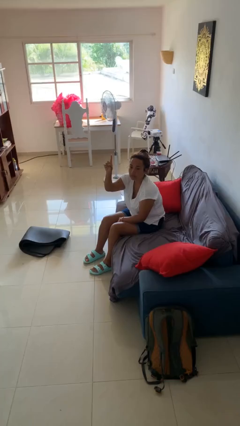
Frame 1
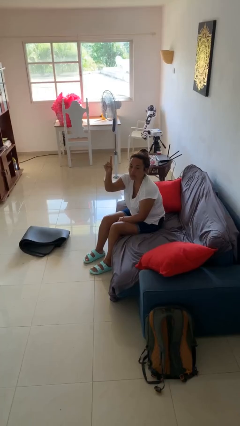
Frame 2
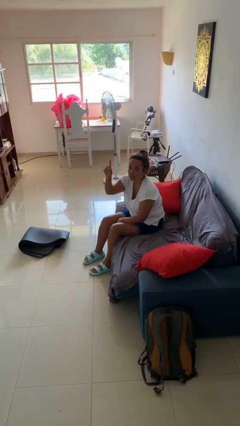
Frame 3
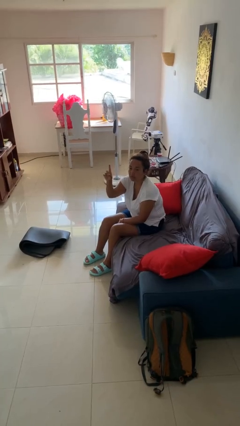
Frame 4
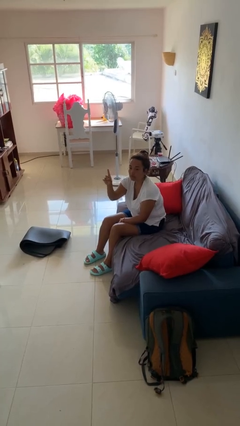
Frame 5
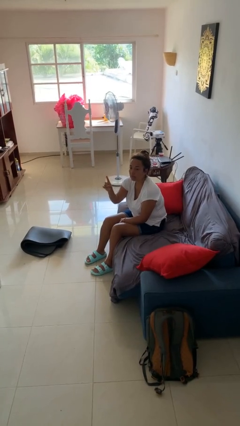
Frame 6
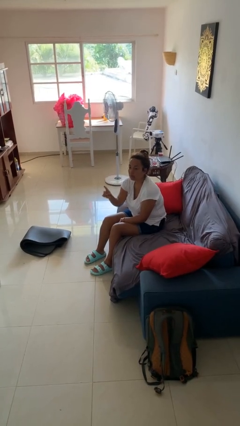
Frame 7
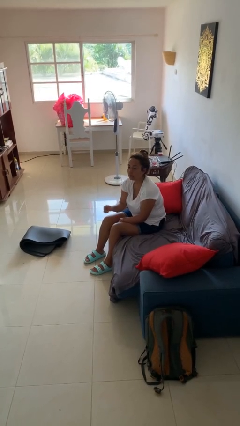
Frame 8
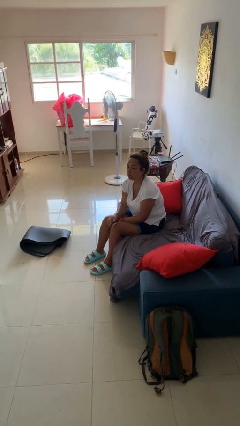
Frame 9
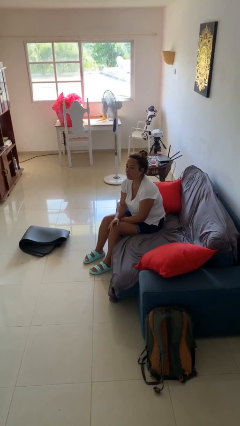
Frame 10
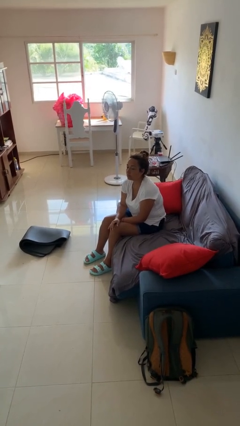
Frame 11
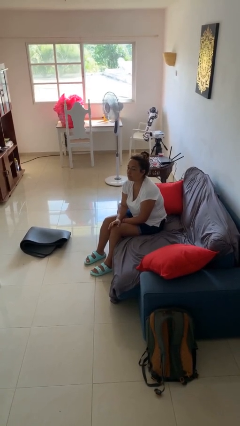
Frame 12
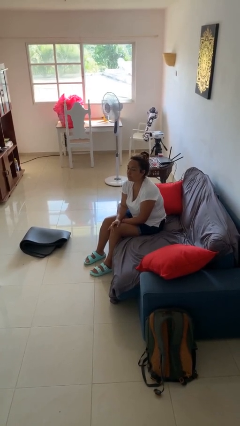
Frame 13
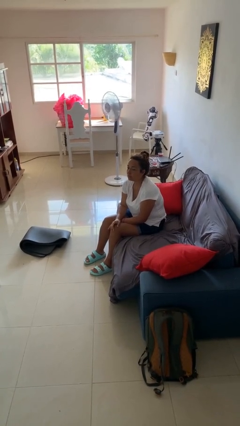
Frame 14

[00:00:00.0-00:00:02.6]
person gestures lower hand

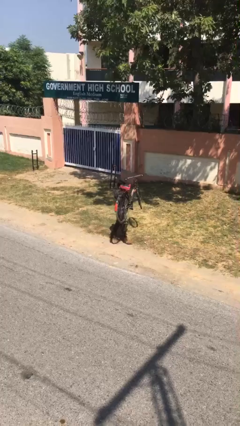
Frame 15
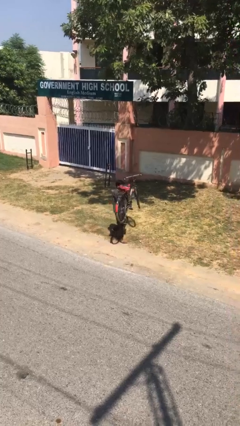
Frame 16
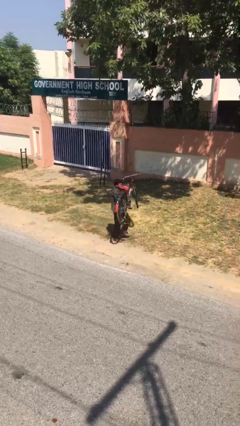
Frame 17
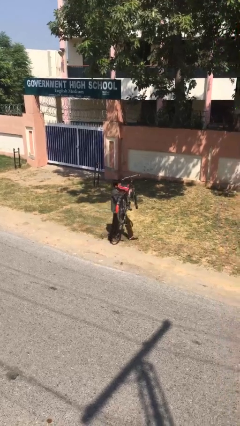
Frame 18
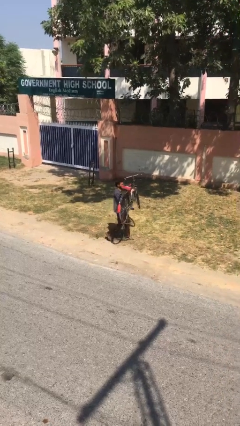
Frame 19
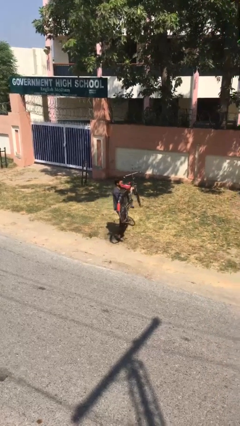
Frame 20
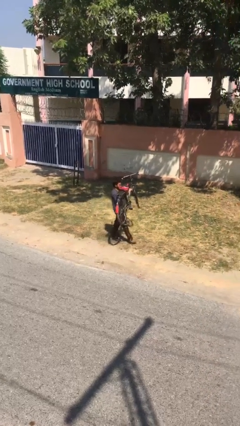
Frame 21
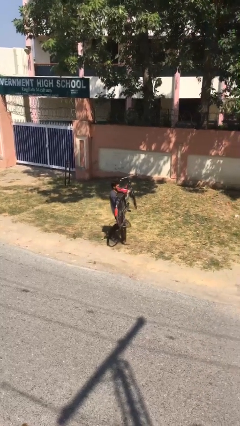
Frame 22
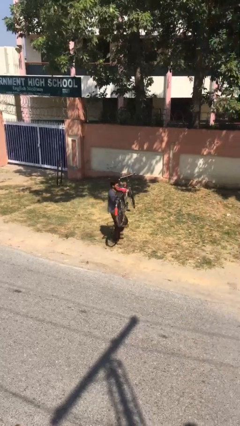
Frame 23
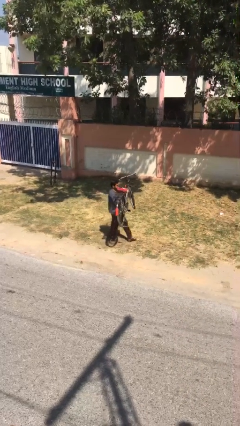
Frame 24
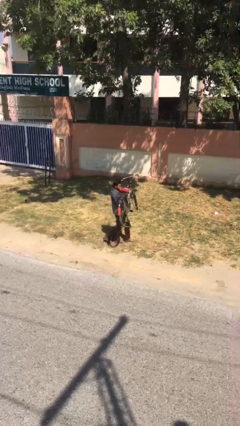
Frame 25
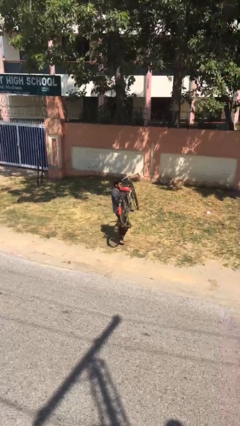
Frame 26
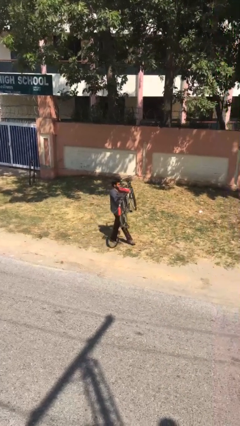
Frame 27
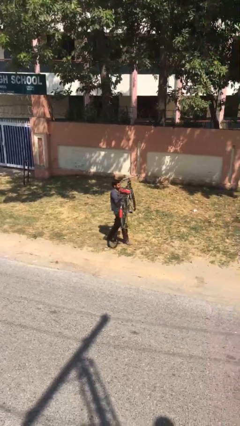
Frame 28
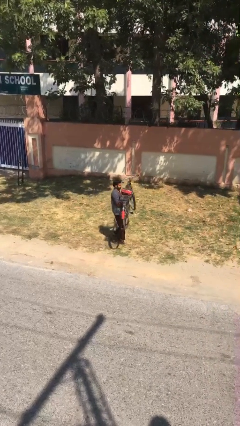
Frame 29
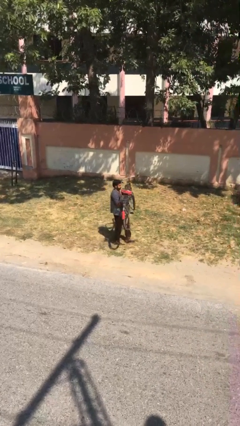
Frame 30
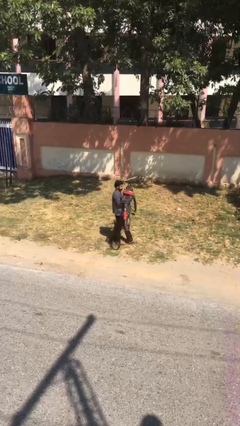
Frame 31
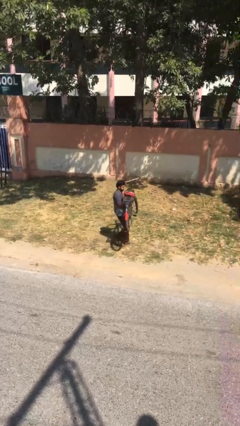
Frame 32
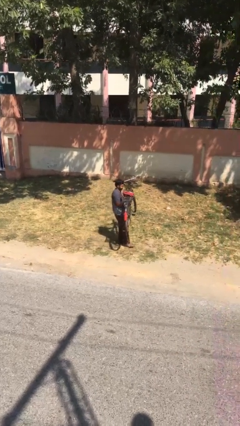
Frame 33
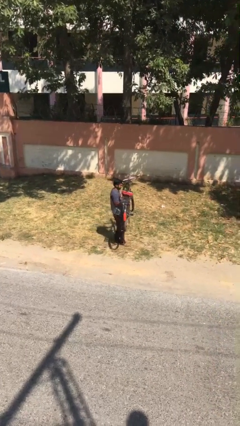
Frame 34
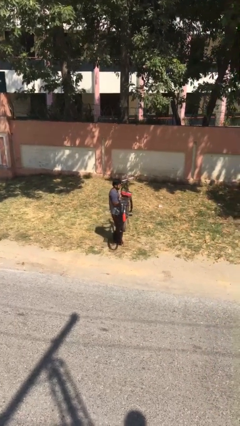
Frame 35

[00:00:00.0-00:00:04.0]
person carries heavy object

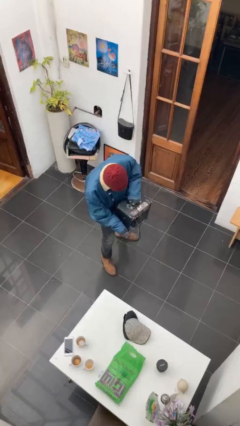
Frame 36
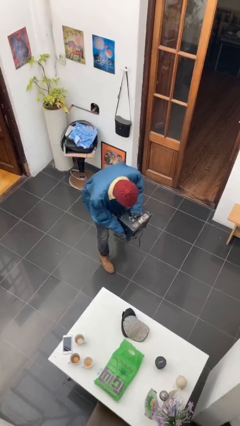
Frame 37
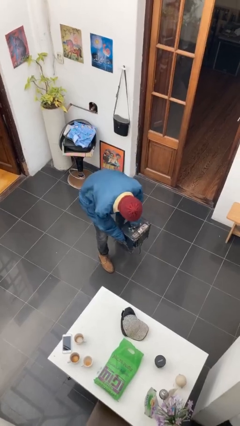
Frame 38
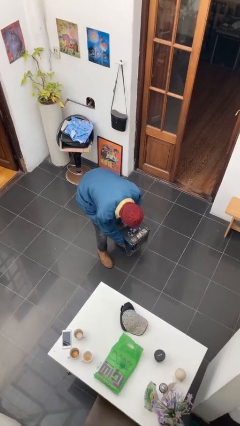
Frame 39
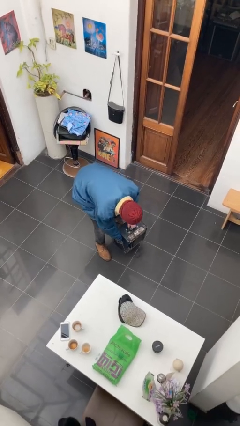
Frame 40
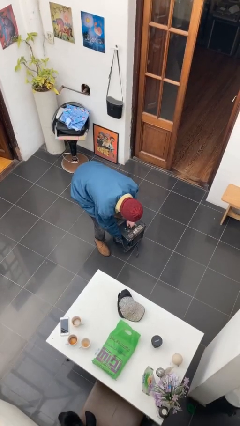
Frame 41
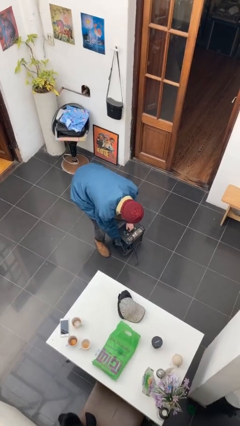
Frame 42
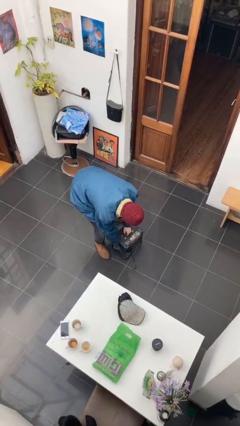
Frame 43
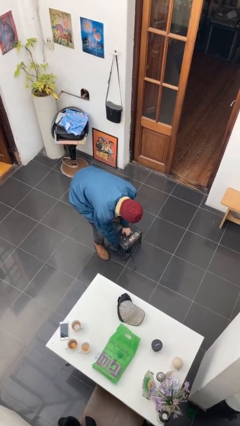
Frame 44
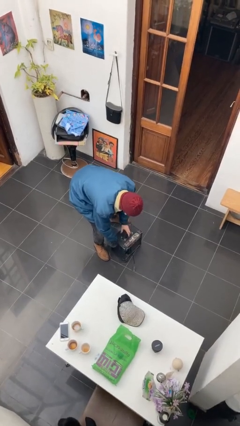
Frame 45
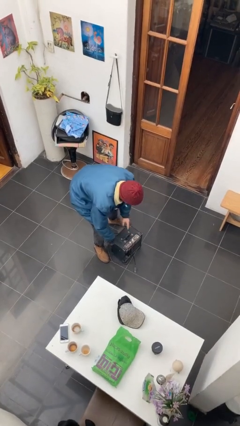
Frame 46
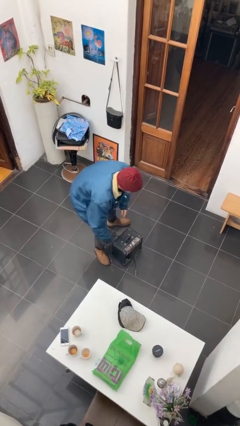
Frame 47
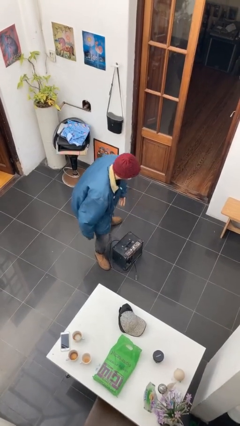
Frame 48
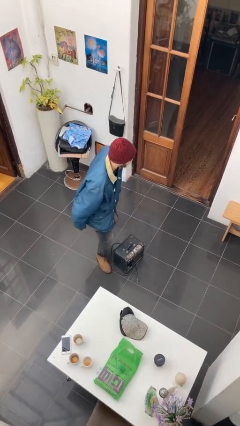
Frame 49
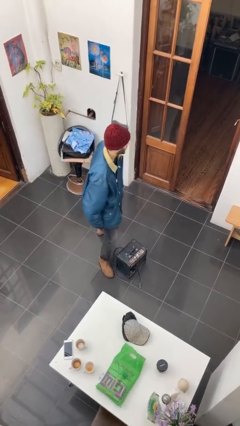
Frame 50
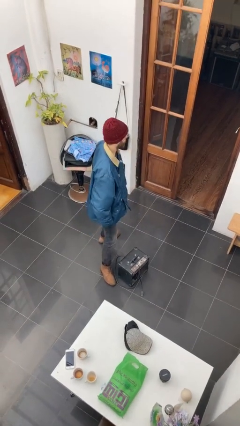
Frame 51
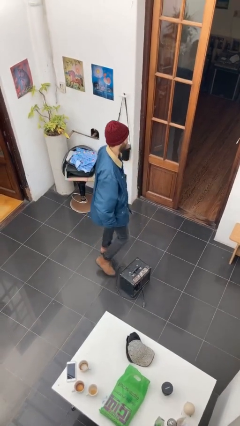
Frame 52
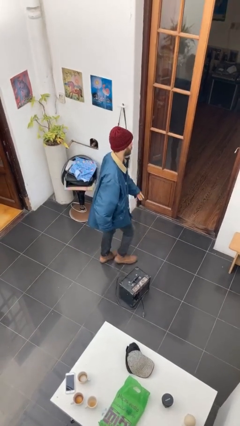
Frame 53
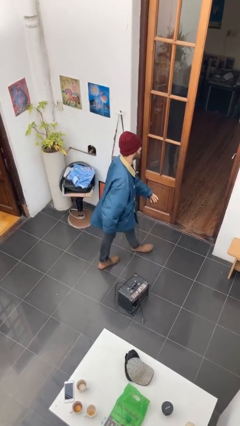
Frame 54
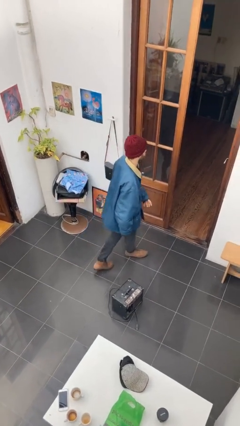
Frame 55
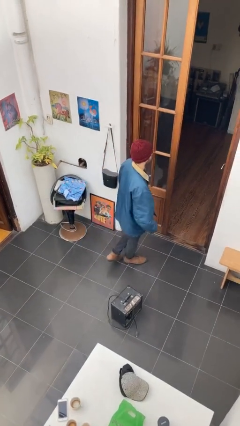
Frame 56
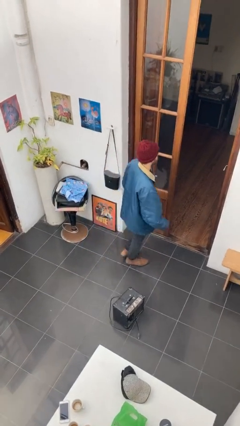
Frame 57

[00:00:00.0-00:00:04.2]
person puts down object on floor

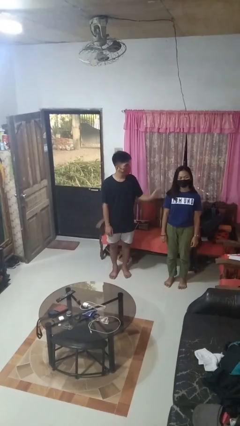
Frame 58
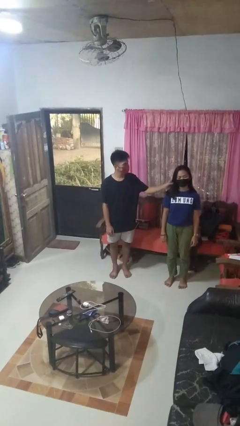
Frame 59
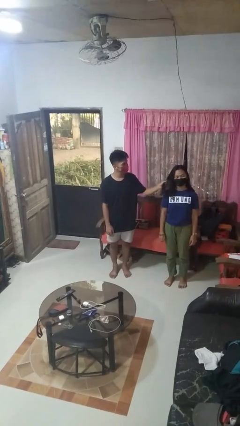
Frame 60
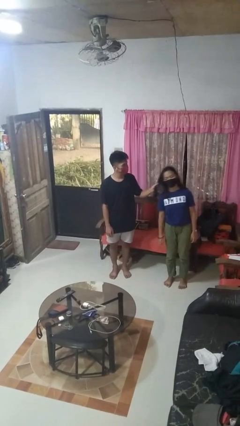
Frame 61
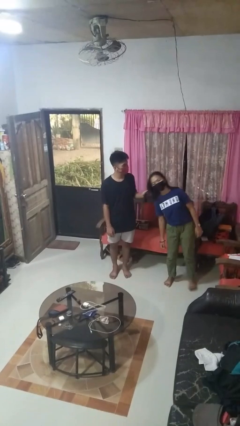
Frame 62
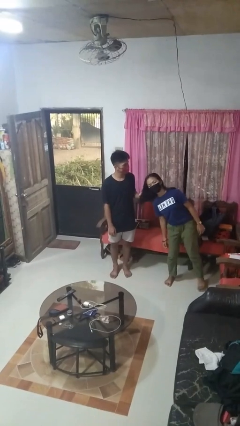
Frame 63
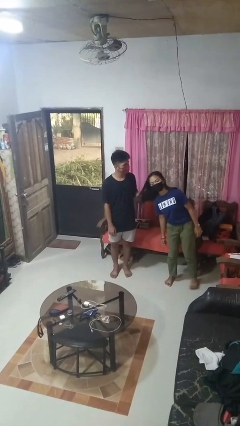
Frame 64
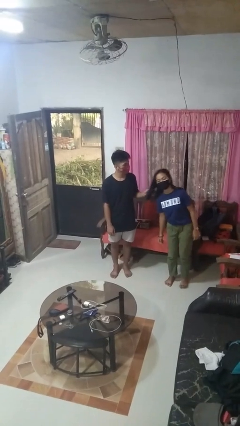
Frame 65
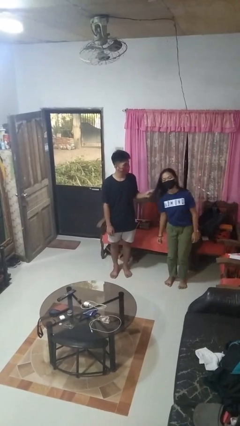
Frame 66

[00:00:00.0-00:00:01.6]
person grabs person by hair

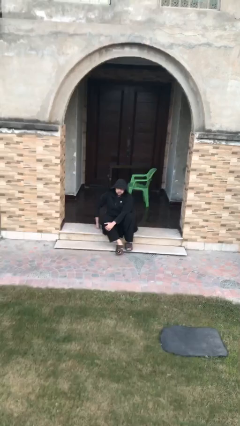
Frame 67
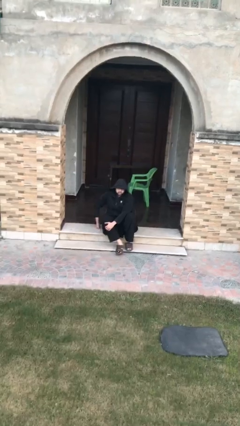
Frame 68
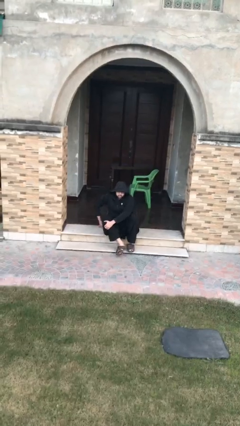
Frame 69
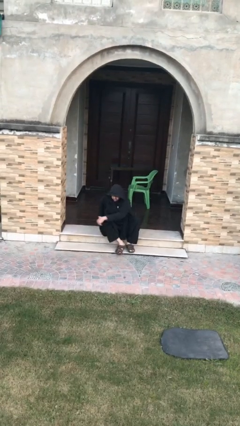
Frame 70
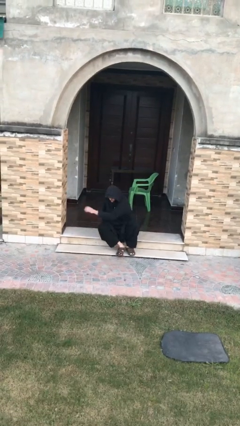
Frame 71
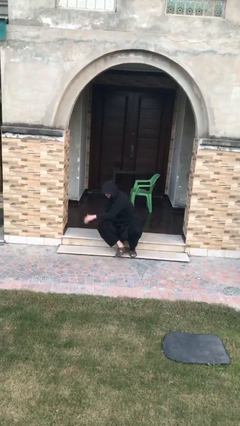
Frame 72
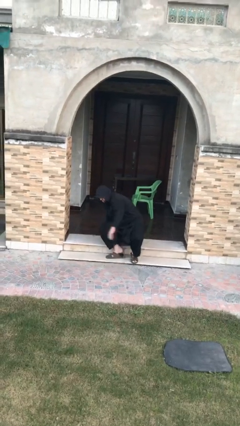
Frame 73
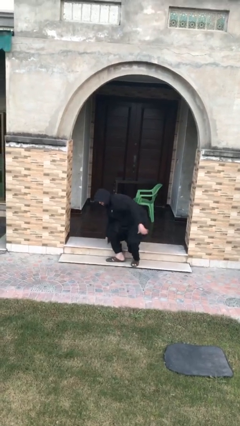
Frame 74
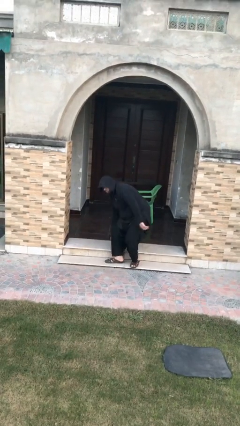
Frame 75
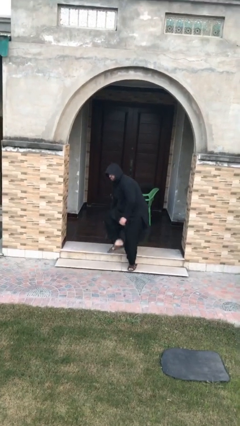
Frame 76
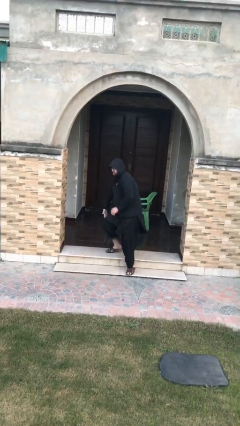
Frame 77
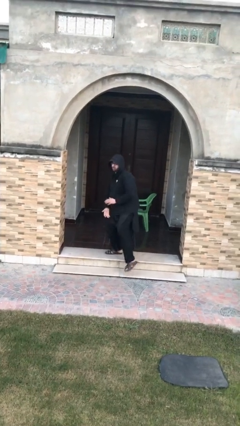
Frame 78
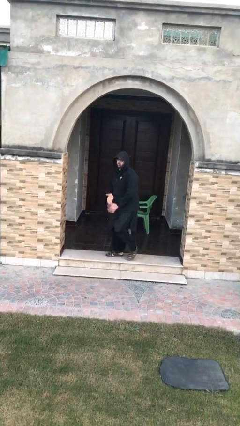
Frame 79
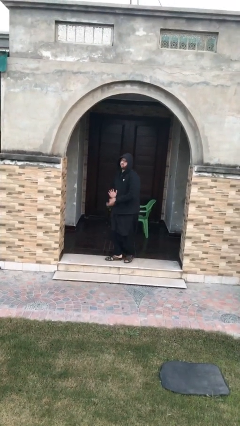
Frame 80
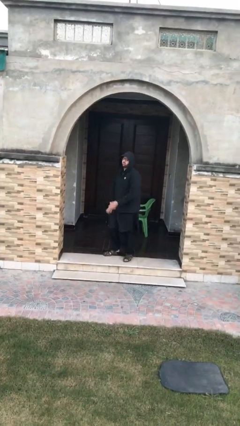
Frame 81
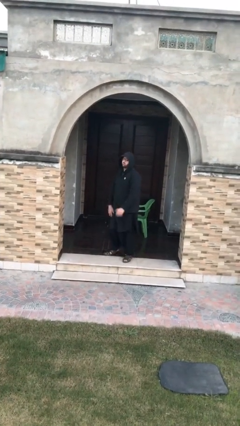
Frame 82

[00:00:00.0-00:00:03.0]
person stands up

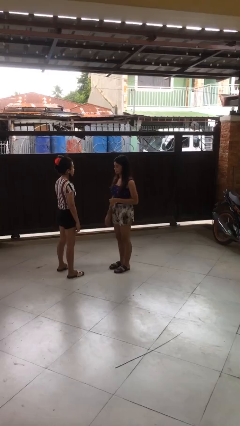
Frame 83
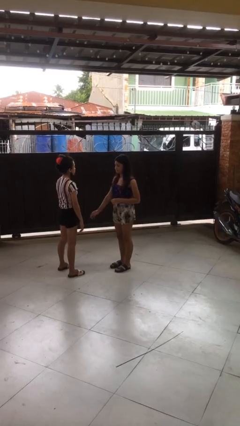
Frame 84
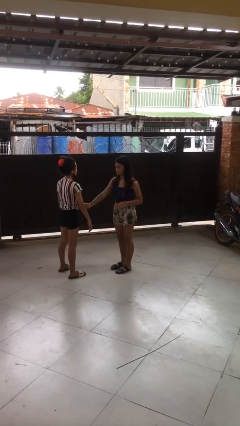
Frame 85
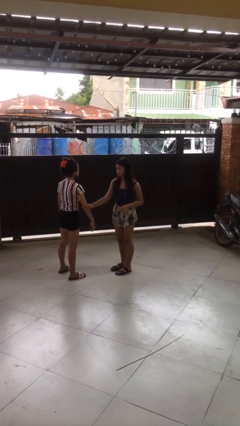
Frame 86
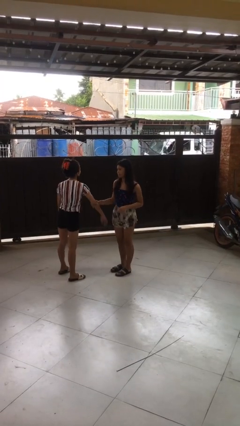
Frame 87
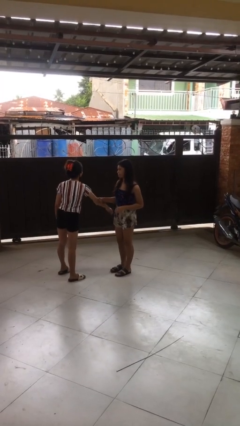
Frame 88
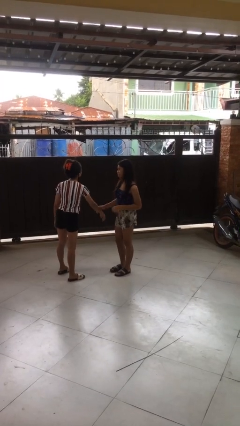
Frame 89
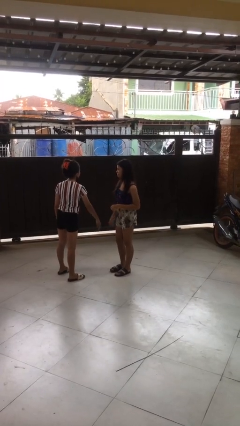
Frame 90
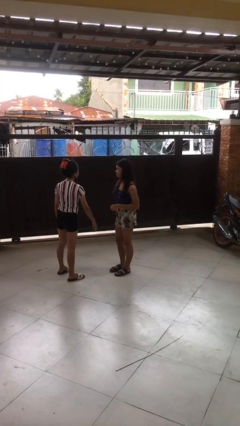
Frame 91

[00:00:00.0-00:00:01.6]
person grabs person by forearm

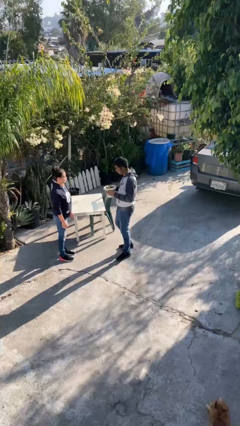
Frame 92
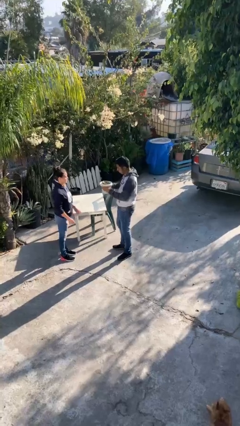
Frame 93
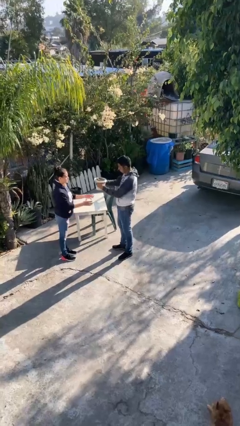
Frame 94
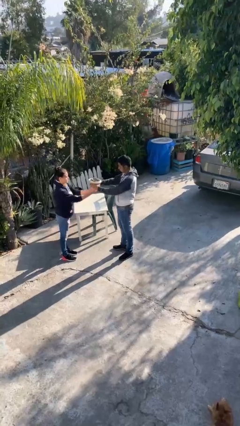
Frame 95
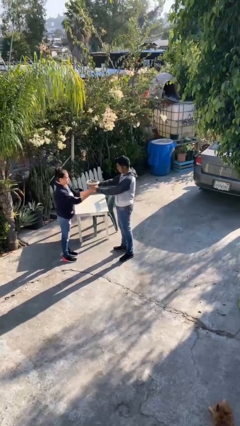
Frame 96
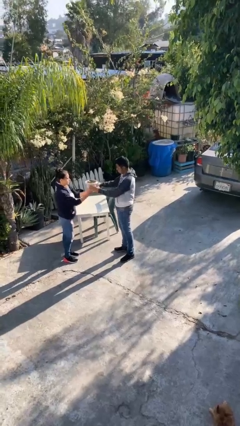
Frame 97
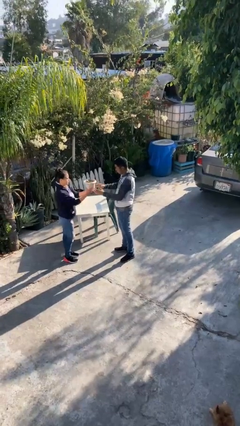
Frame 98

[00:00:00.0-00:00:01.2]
person transfers object to person
